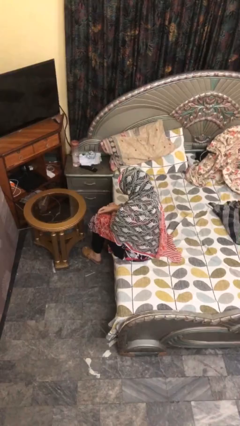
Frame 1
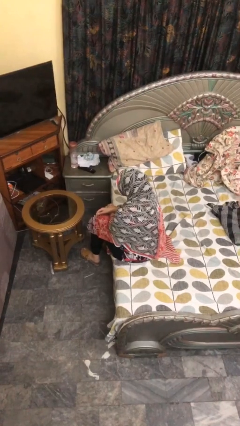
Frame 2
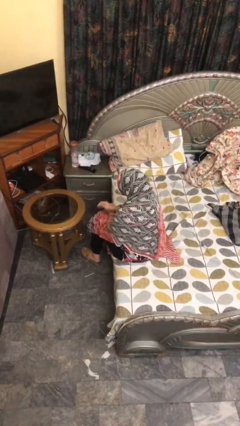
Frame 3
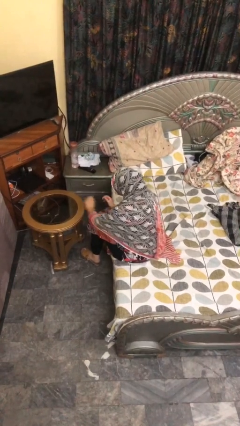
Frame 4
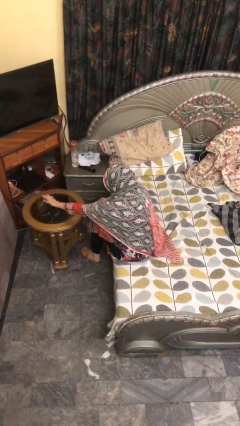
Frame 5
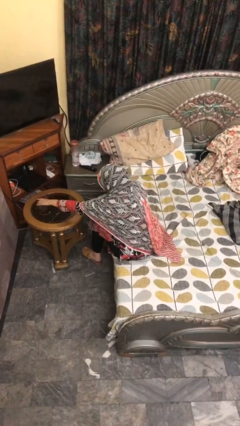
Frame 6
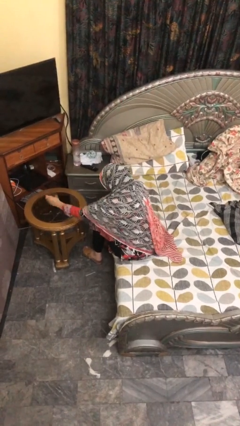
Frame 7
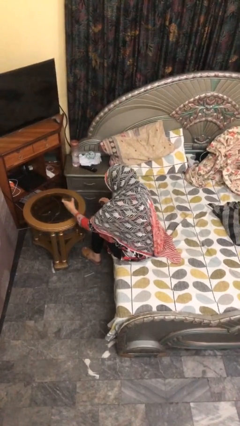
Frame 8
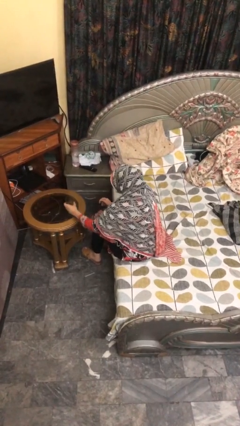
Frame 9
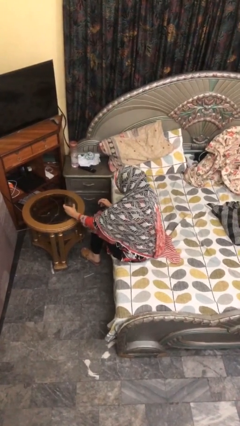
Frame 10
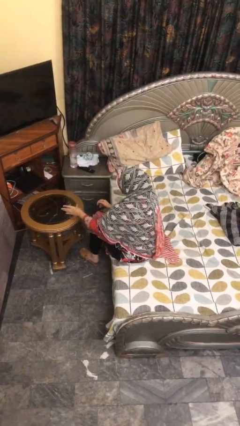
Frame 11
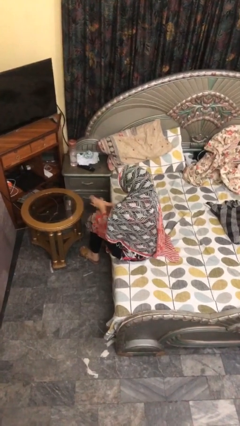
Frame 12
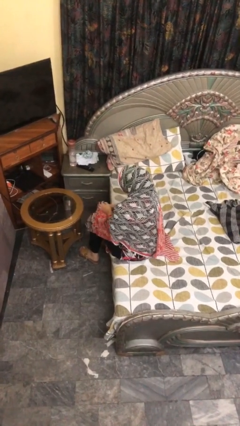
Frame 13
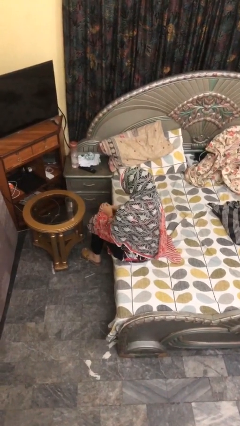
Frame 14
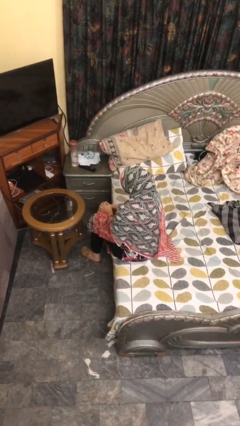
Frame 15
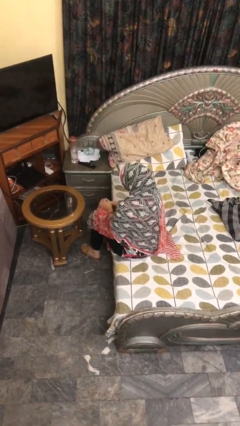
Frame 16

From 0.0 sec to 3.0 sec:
person sets upright glass

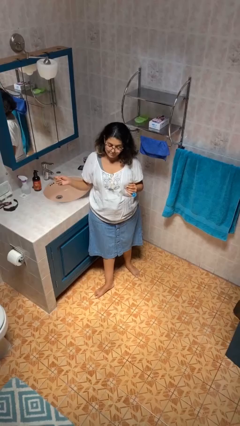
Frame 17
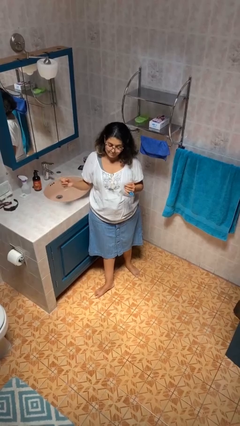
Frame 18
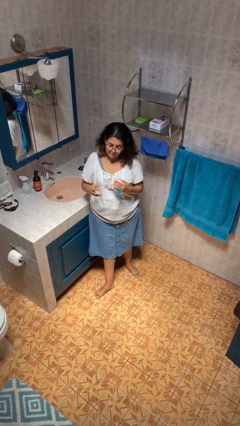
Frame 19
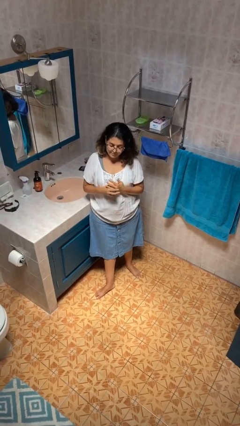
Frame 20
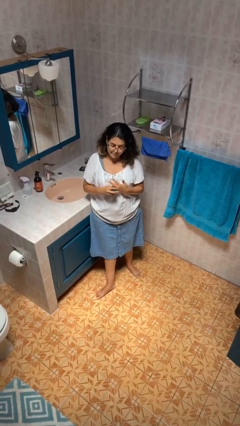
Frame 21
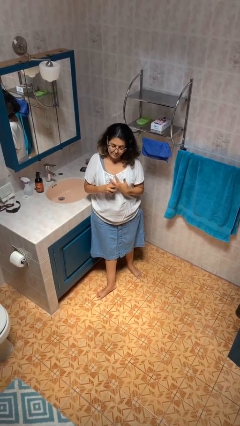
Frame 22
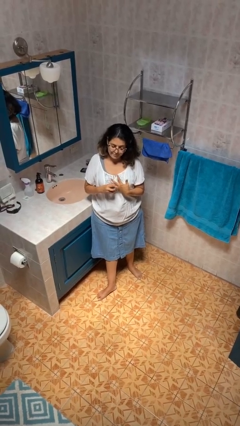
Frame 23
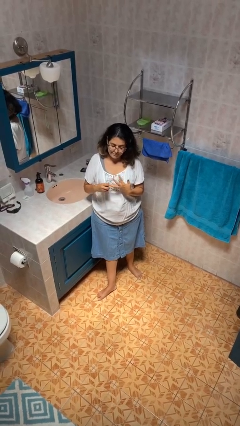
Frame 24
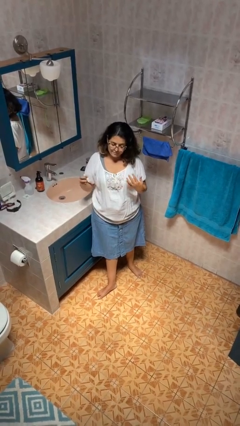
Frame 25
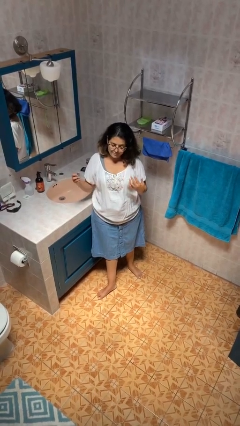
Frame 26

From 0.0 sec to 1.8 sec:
person takes off ring

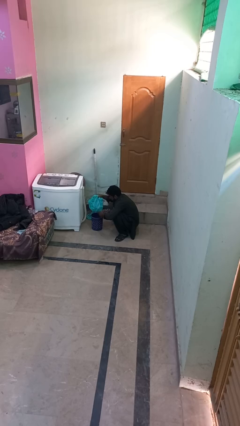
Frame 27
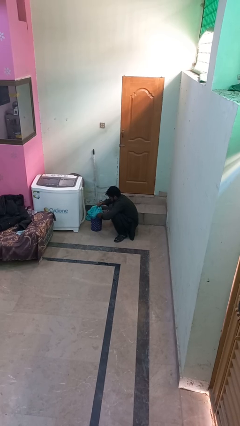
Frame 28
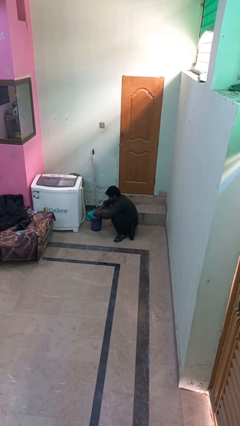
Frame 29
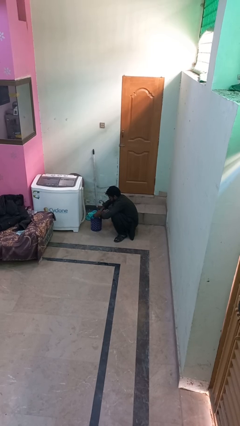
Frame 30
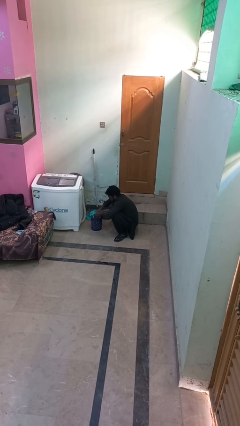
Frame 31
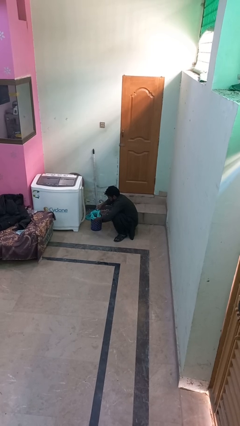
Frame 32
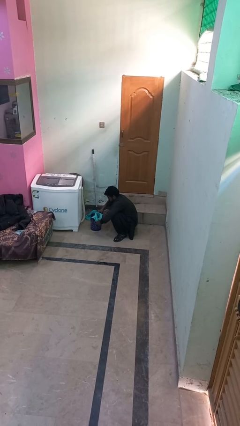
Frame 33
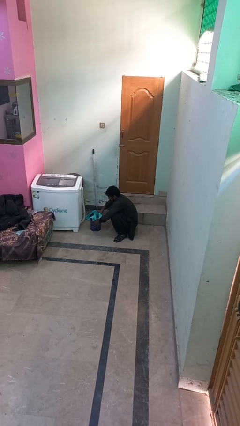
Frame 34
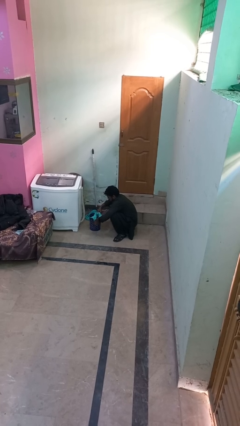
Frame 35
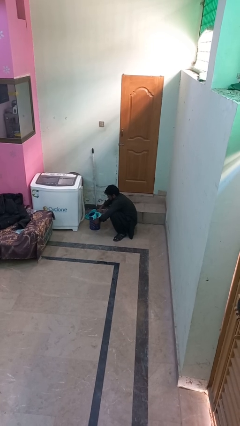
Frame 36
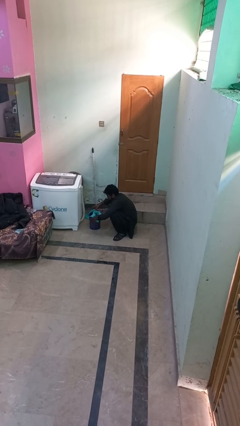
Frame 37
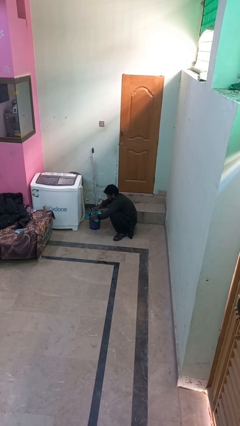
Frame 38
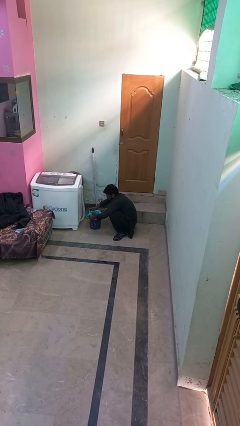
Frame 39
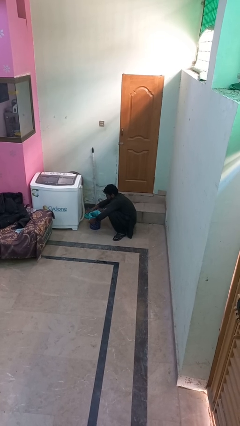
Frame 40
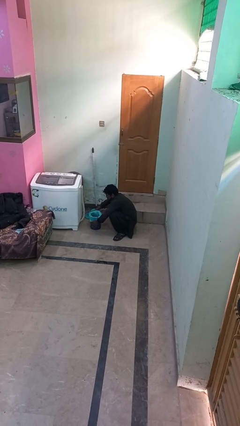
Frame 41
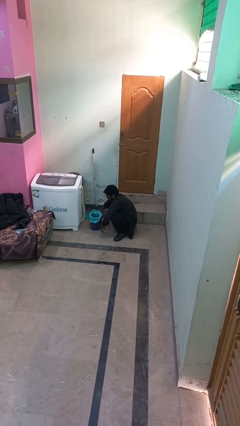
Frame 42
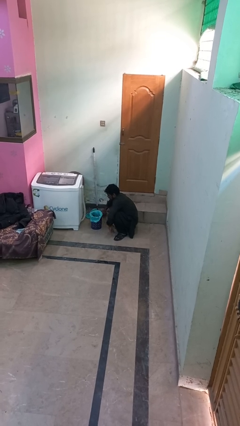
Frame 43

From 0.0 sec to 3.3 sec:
person inserts trashbag into trashcan

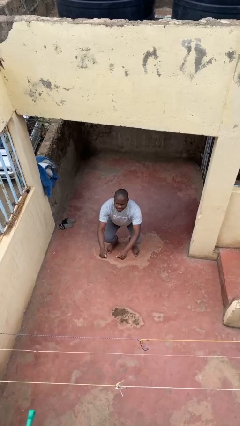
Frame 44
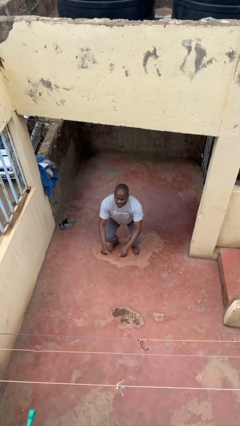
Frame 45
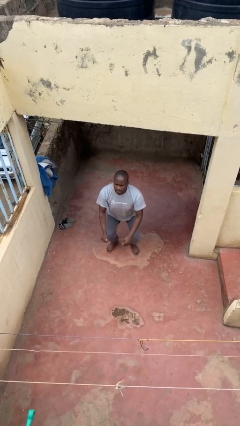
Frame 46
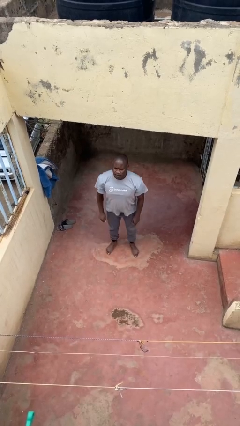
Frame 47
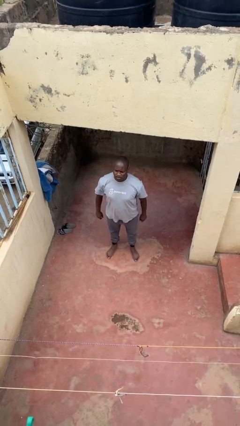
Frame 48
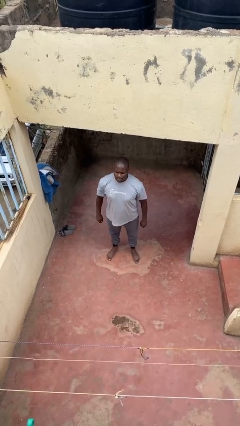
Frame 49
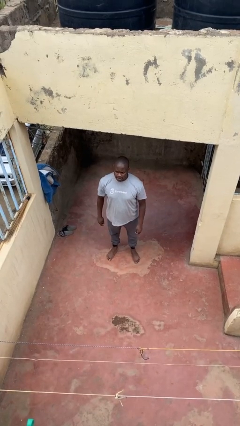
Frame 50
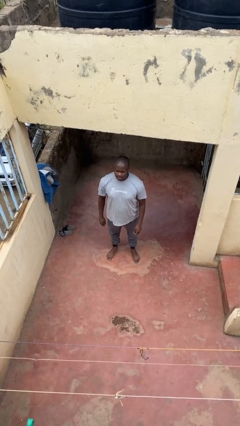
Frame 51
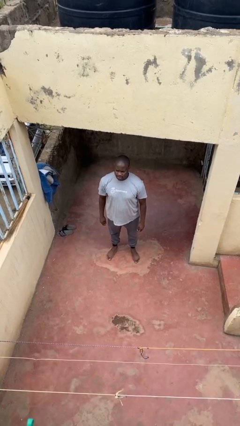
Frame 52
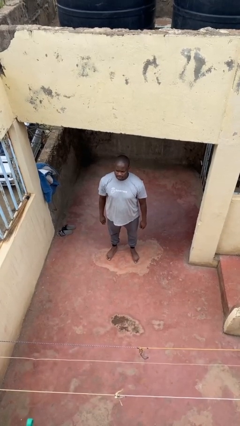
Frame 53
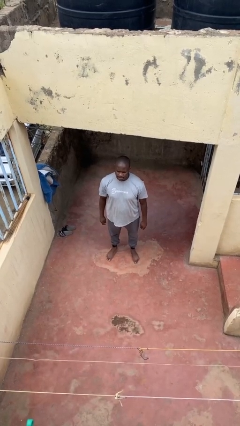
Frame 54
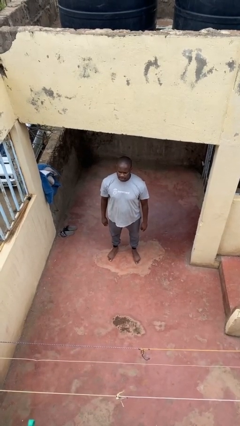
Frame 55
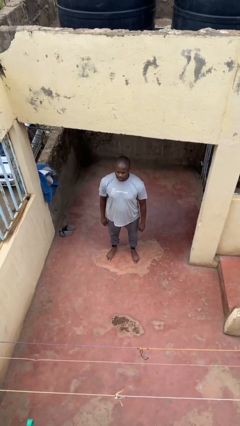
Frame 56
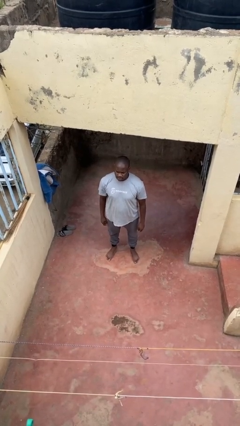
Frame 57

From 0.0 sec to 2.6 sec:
person stands up

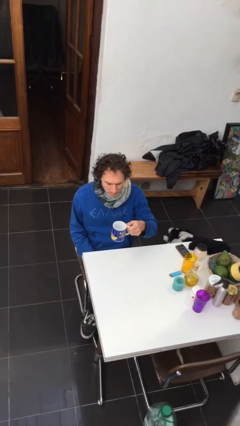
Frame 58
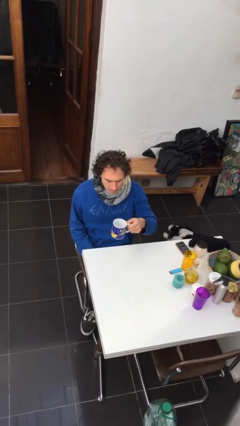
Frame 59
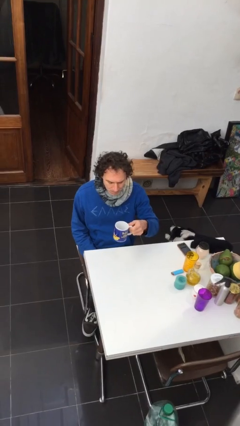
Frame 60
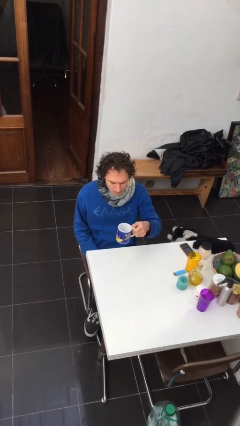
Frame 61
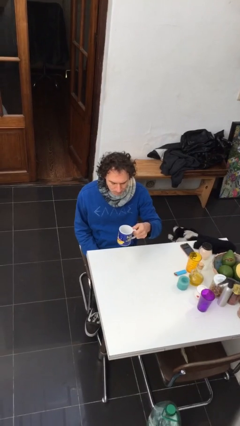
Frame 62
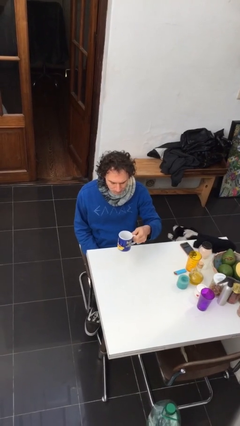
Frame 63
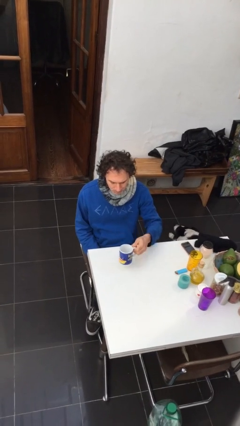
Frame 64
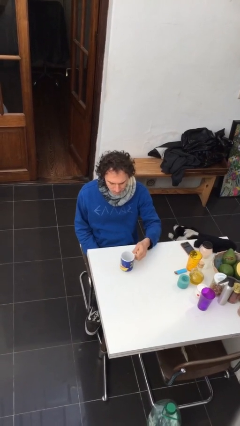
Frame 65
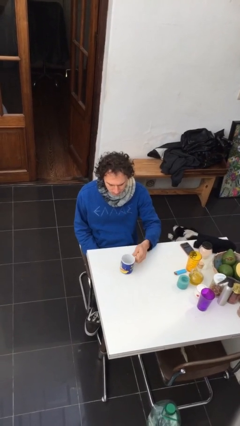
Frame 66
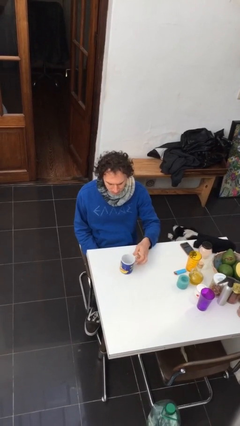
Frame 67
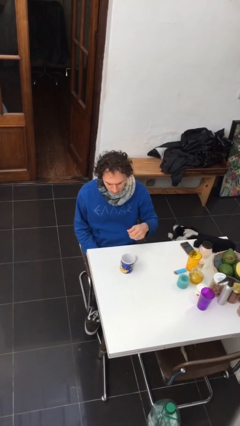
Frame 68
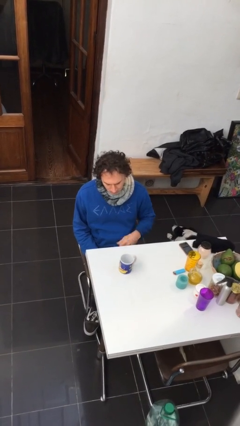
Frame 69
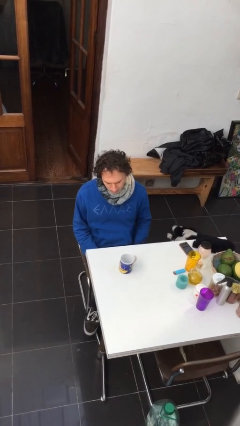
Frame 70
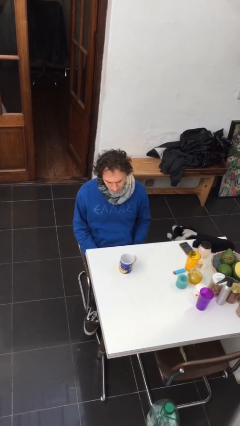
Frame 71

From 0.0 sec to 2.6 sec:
person puts down object on table

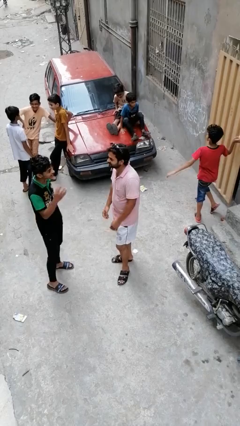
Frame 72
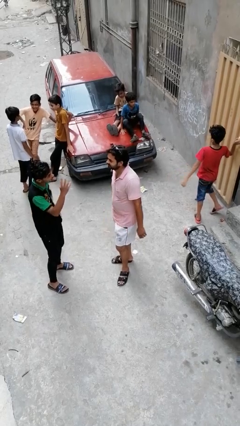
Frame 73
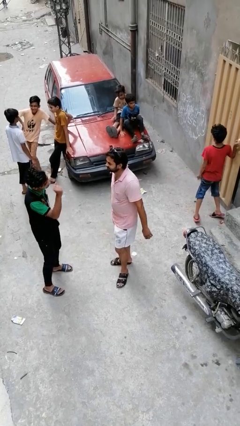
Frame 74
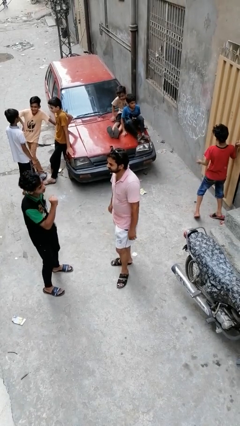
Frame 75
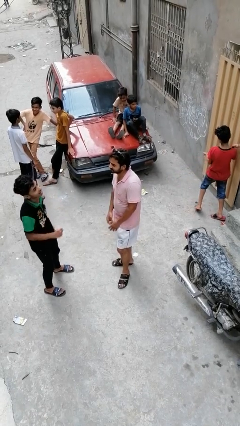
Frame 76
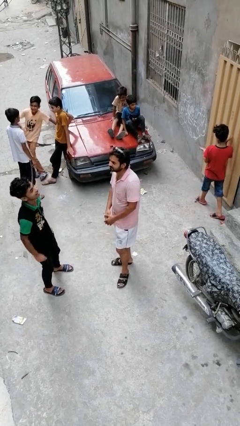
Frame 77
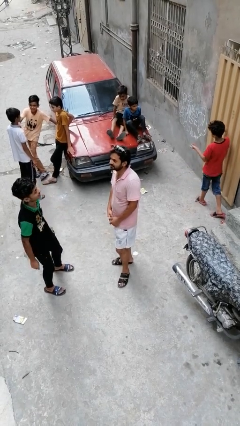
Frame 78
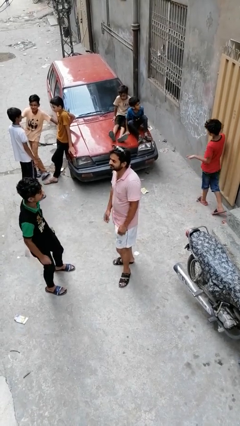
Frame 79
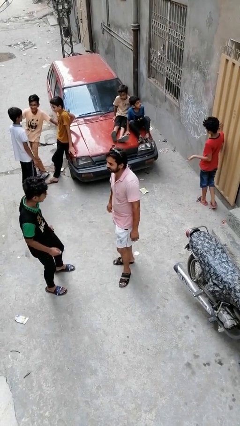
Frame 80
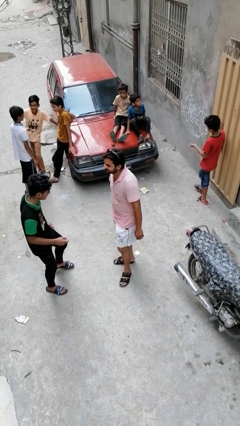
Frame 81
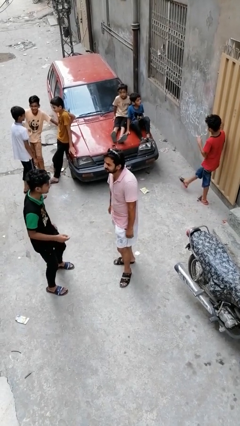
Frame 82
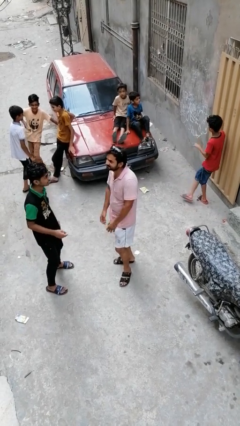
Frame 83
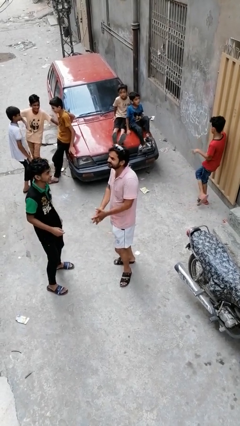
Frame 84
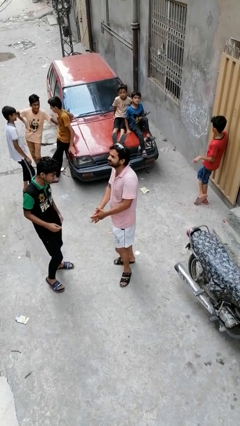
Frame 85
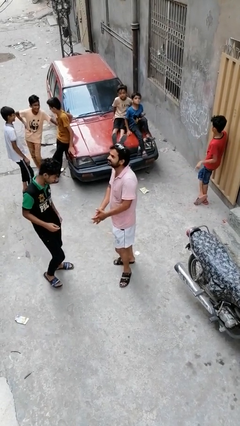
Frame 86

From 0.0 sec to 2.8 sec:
person laughs with person

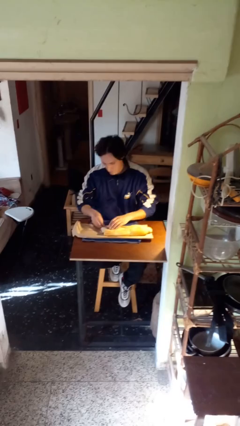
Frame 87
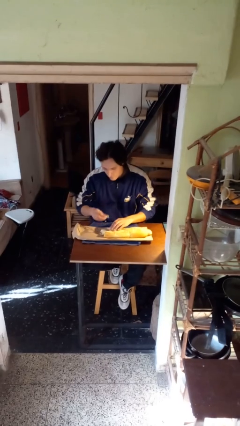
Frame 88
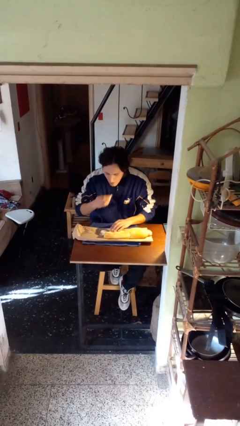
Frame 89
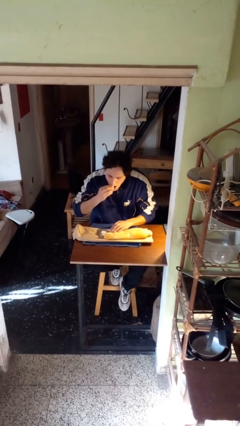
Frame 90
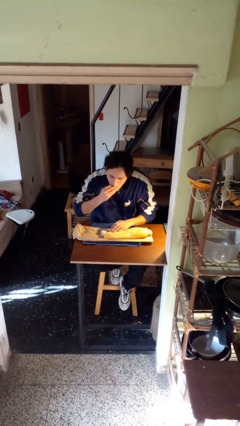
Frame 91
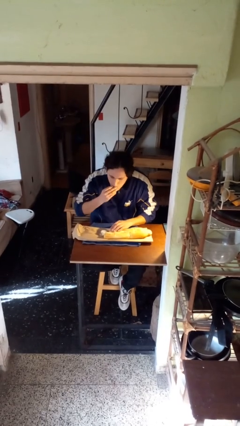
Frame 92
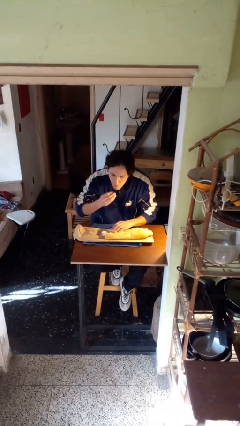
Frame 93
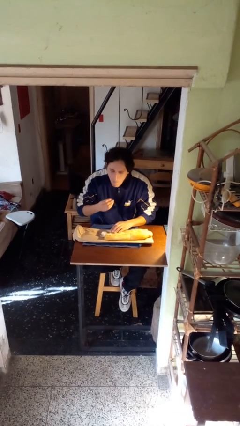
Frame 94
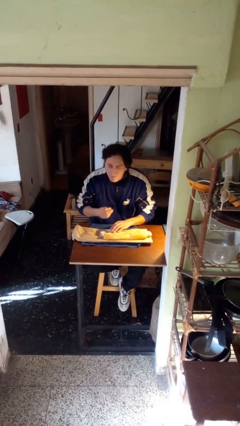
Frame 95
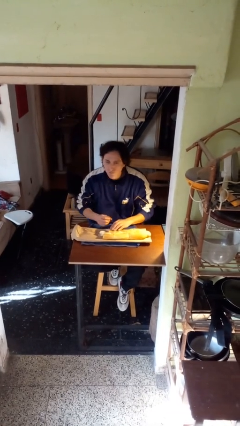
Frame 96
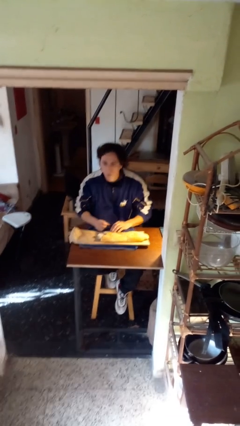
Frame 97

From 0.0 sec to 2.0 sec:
person eats with hands
